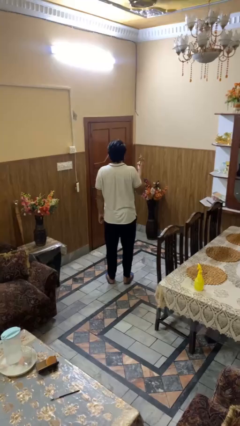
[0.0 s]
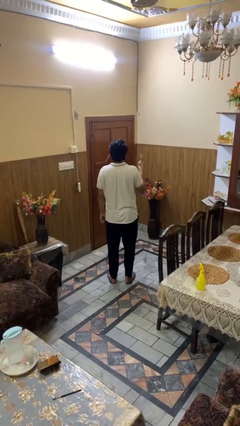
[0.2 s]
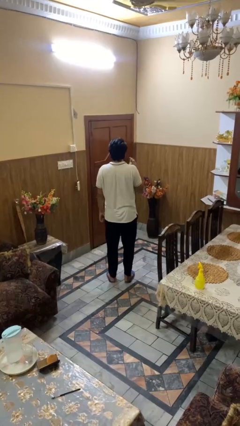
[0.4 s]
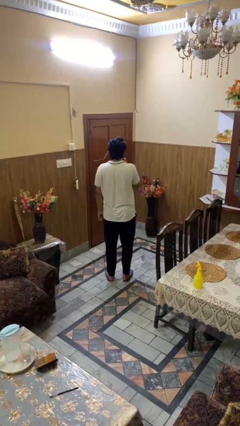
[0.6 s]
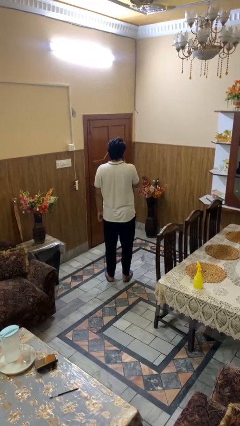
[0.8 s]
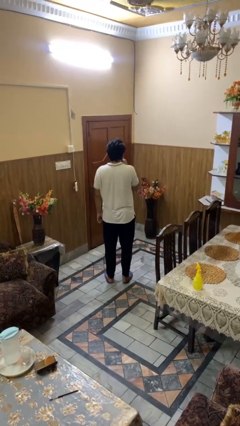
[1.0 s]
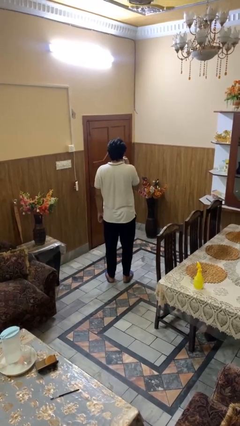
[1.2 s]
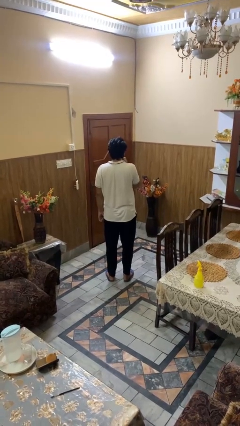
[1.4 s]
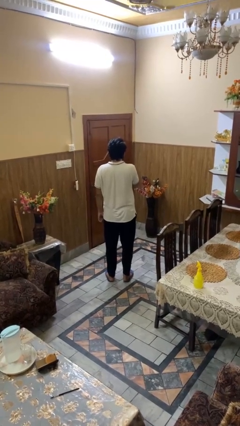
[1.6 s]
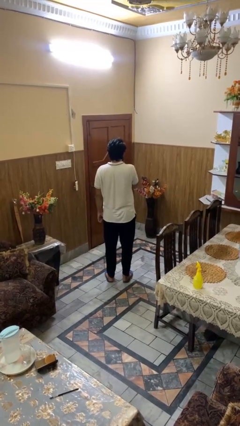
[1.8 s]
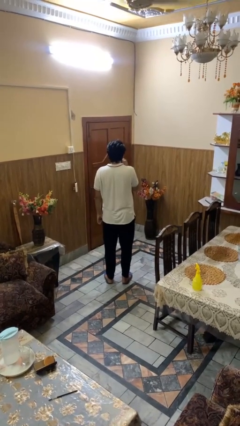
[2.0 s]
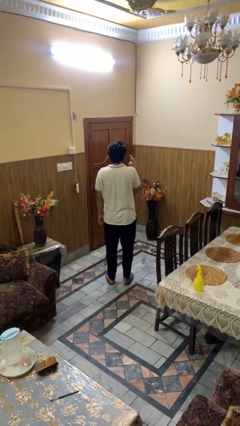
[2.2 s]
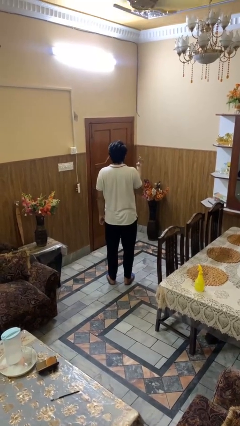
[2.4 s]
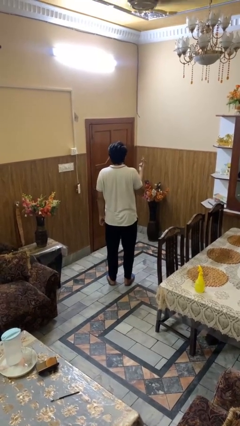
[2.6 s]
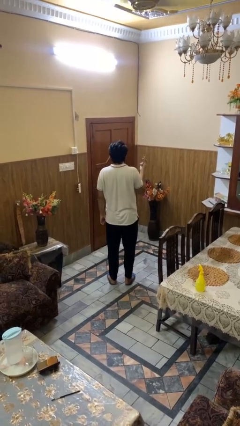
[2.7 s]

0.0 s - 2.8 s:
person applies lip makeup

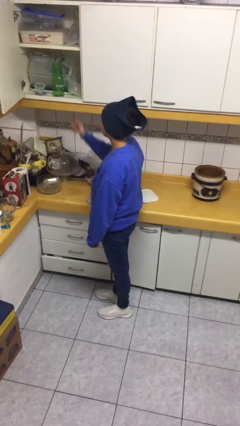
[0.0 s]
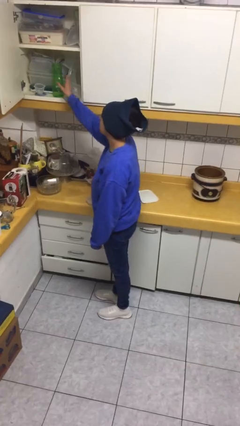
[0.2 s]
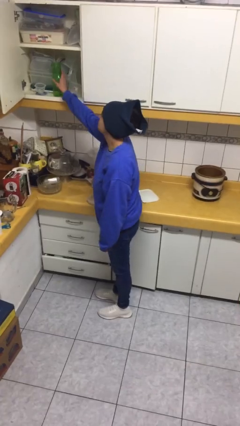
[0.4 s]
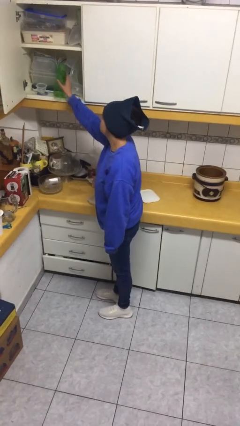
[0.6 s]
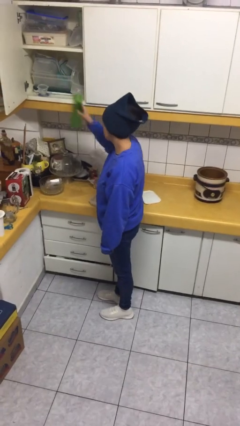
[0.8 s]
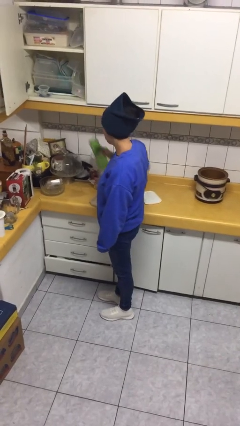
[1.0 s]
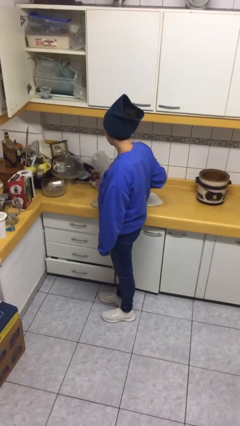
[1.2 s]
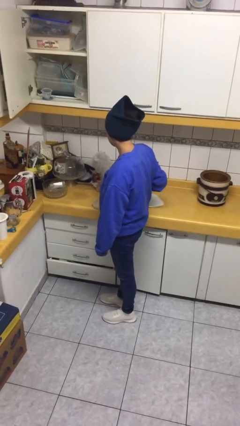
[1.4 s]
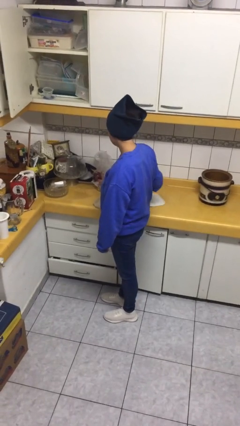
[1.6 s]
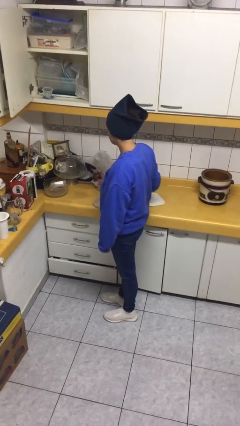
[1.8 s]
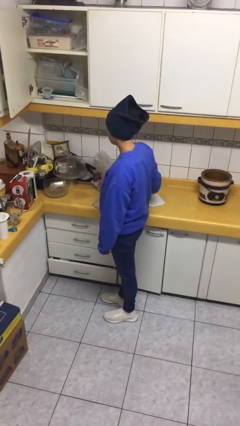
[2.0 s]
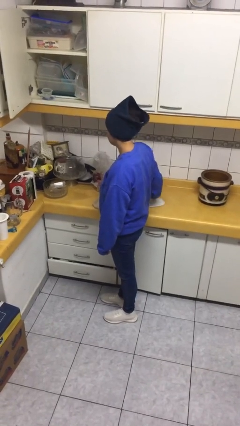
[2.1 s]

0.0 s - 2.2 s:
person takes object from cabinet

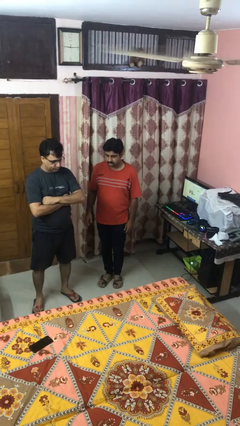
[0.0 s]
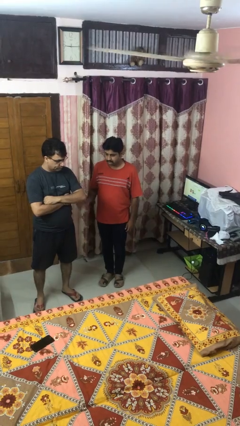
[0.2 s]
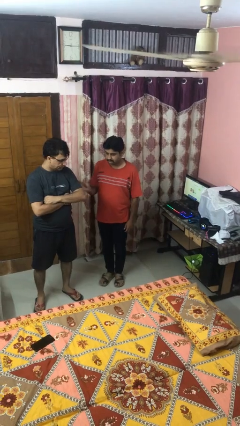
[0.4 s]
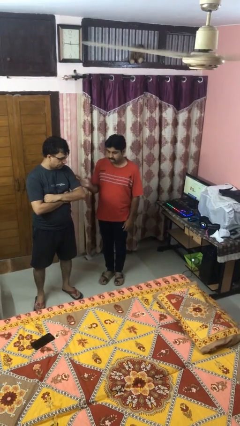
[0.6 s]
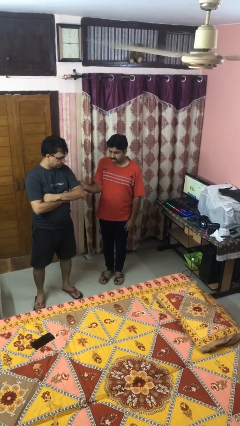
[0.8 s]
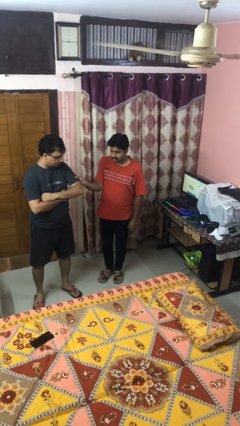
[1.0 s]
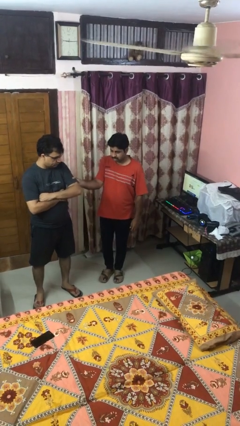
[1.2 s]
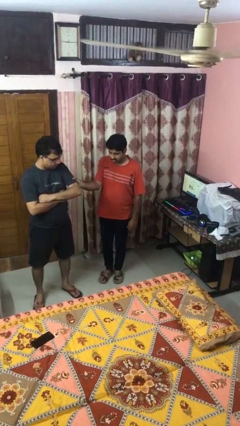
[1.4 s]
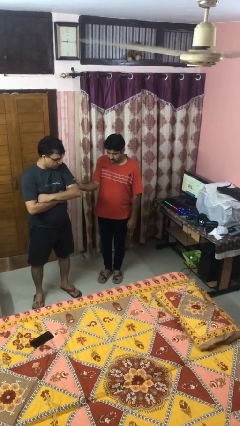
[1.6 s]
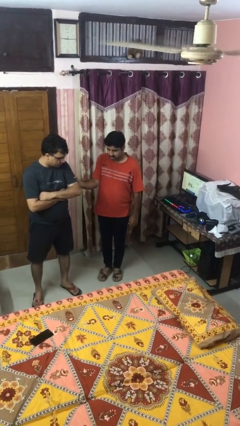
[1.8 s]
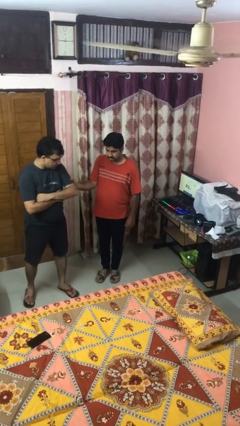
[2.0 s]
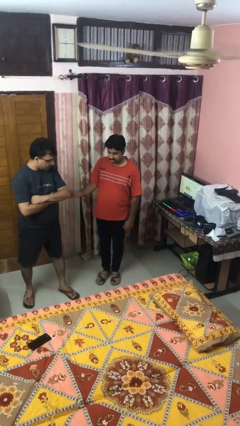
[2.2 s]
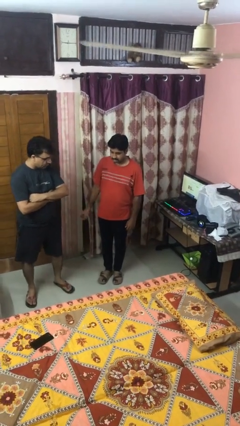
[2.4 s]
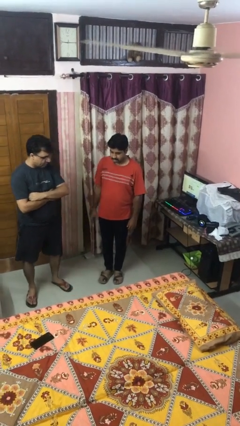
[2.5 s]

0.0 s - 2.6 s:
person grabs person by bicep

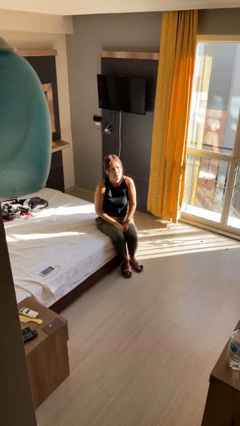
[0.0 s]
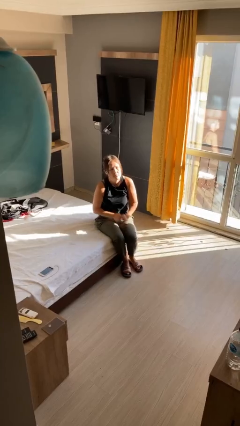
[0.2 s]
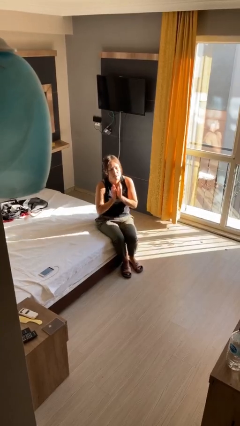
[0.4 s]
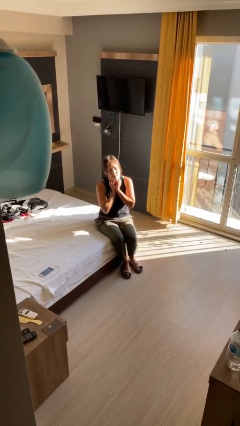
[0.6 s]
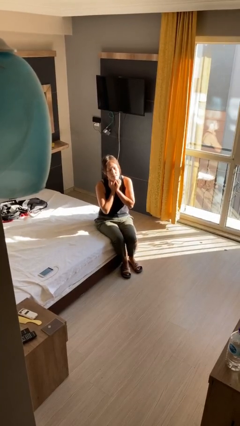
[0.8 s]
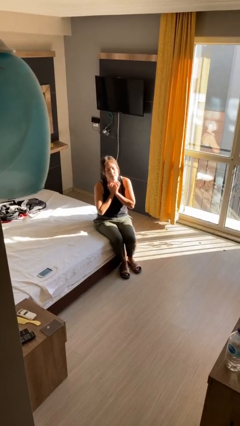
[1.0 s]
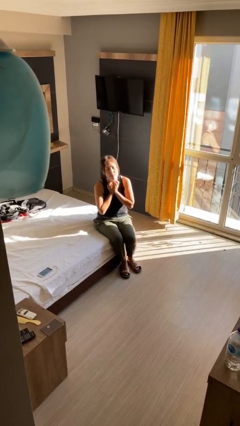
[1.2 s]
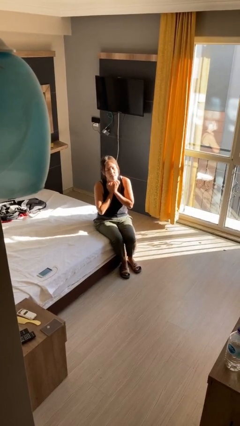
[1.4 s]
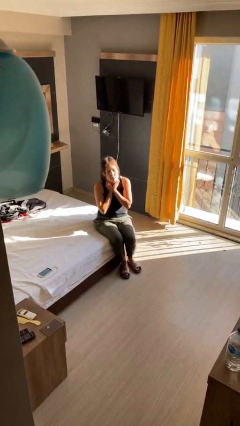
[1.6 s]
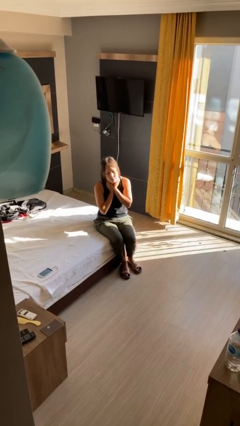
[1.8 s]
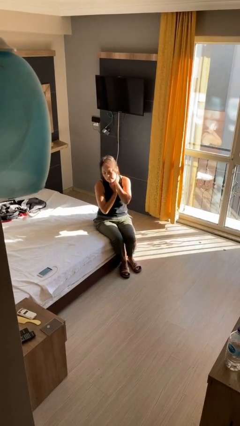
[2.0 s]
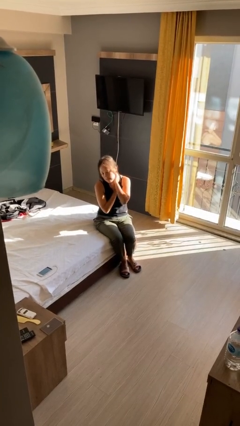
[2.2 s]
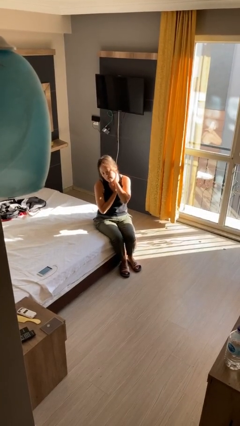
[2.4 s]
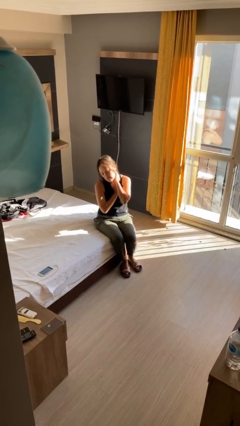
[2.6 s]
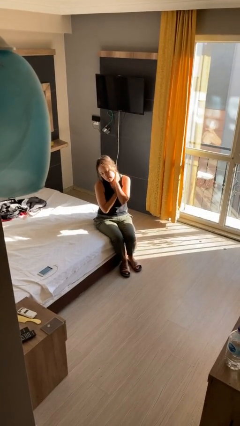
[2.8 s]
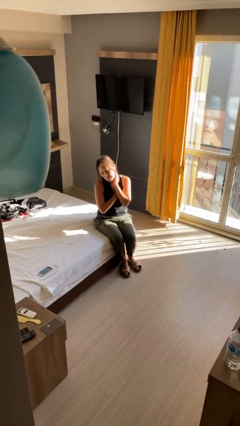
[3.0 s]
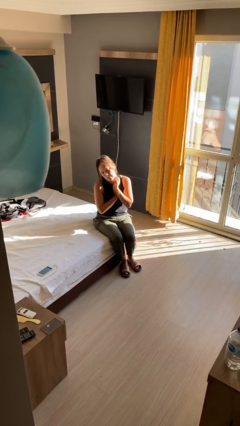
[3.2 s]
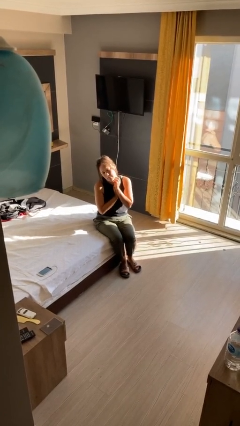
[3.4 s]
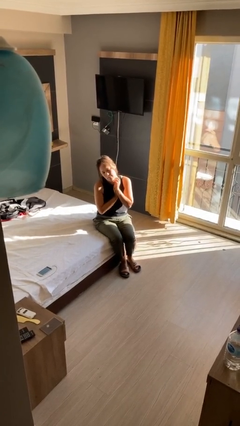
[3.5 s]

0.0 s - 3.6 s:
person rubs neck

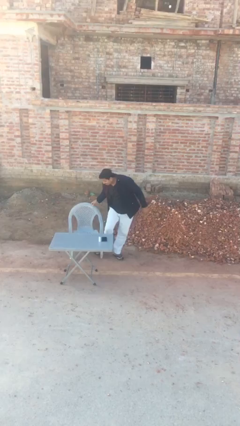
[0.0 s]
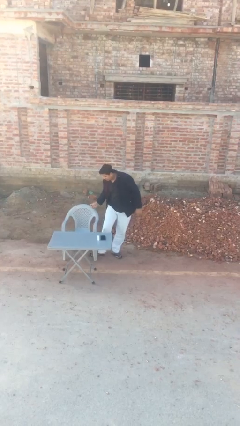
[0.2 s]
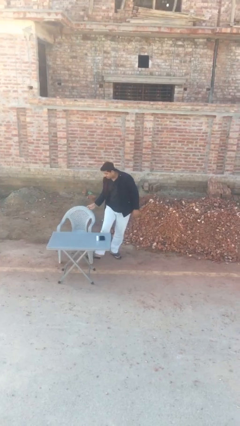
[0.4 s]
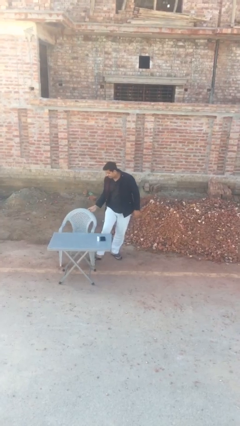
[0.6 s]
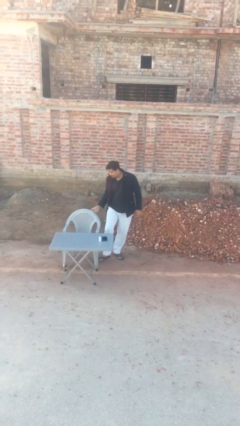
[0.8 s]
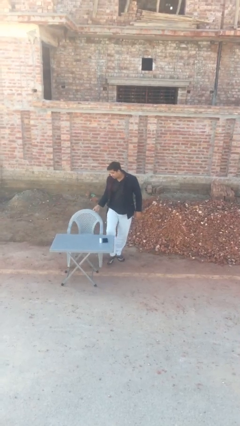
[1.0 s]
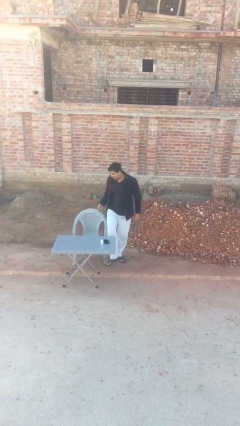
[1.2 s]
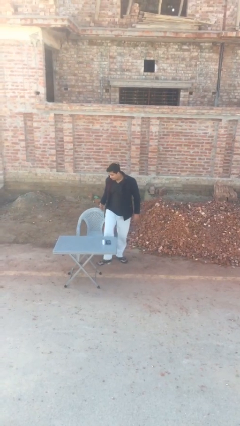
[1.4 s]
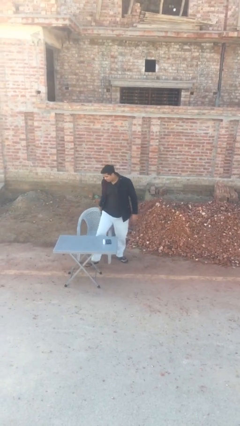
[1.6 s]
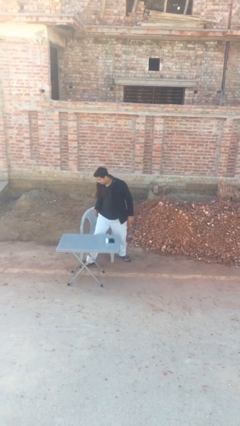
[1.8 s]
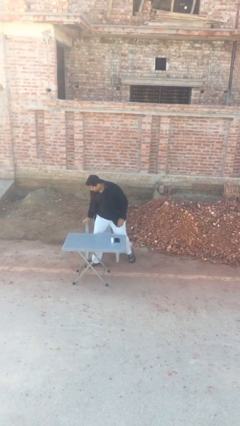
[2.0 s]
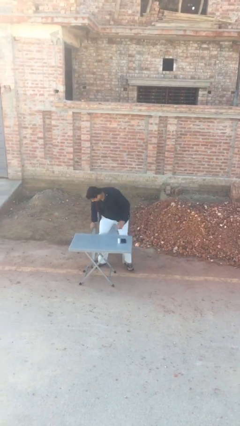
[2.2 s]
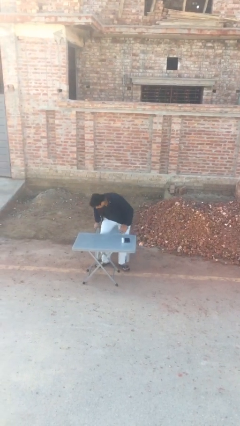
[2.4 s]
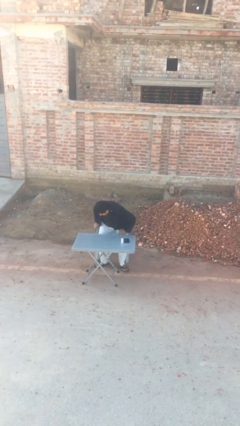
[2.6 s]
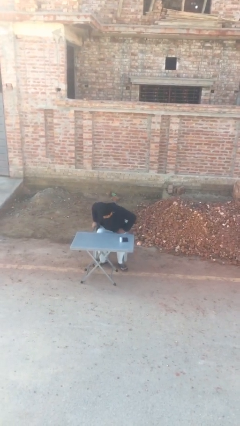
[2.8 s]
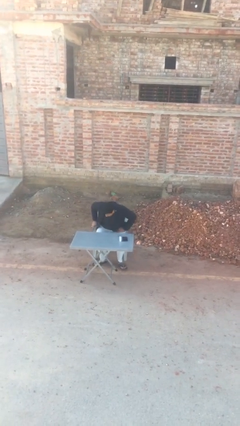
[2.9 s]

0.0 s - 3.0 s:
person sits down

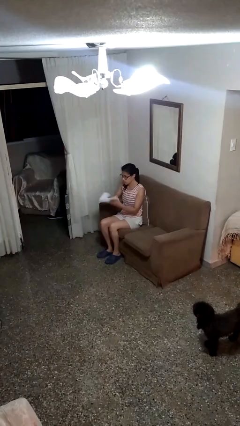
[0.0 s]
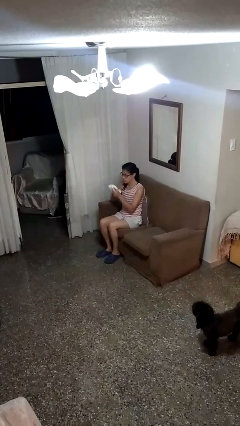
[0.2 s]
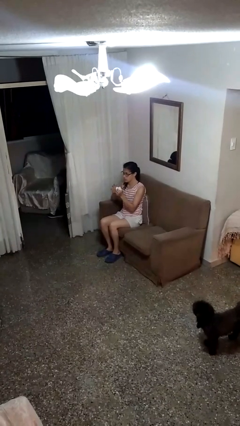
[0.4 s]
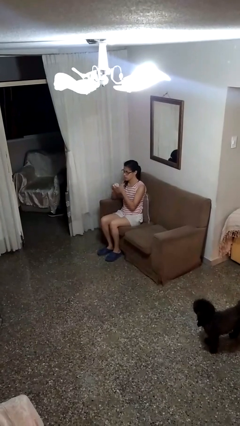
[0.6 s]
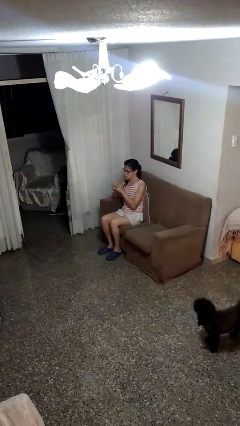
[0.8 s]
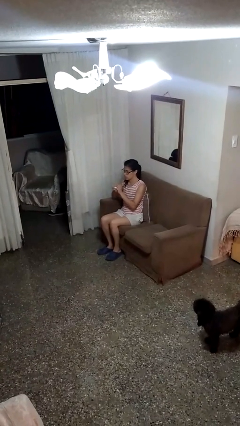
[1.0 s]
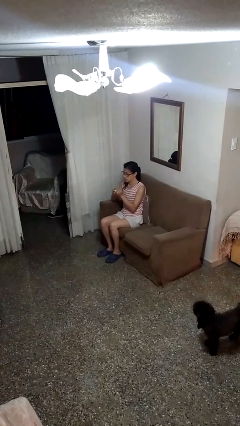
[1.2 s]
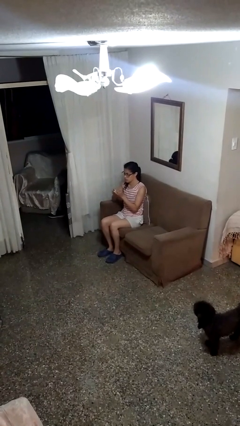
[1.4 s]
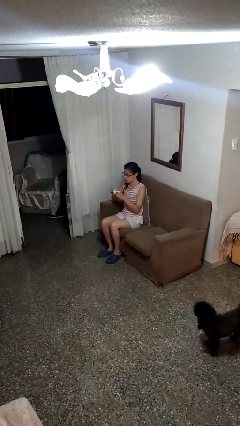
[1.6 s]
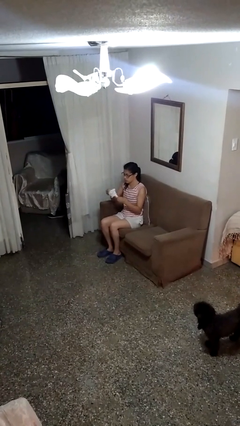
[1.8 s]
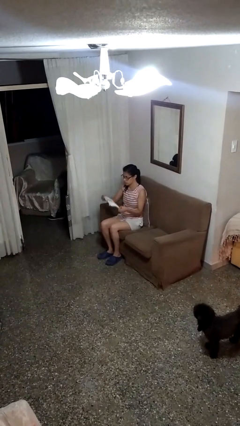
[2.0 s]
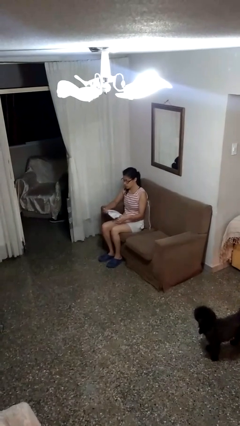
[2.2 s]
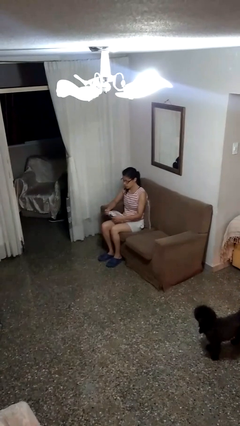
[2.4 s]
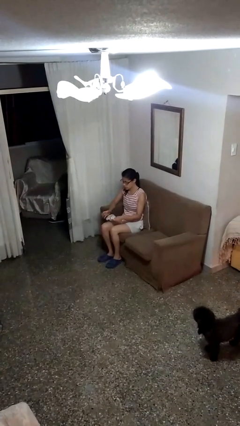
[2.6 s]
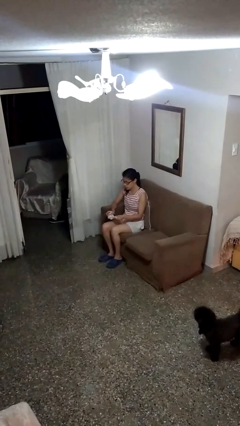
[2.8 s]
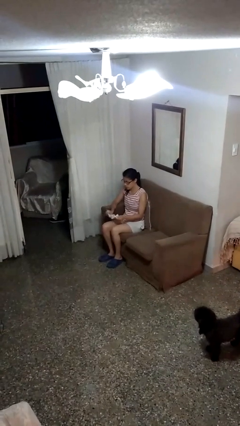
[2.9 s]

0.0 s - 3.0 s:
person crumples paper
